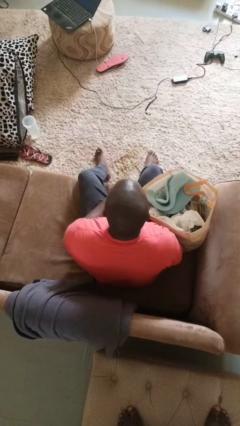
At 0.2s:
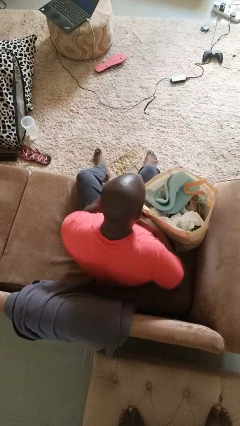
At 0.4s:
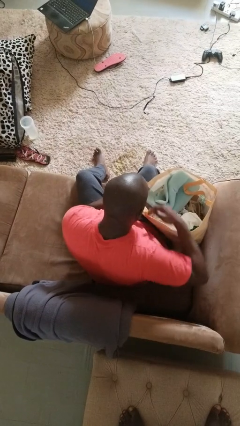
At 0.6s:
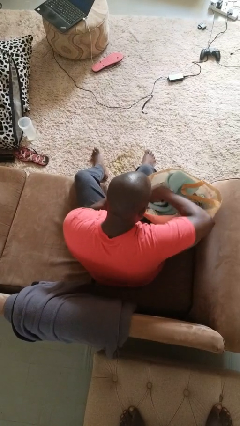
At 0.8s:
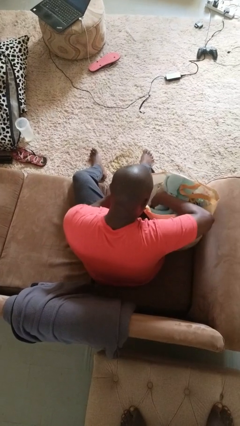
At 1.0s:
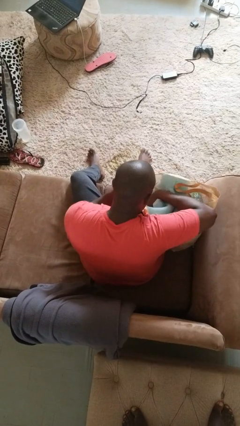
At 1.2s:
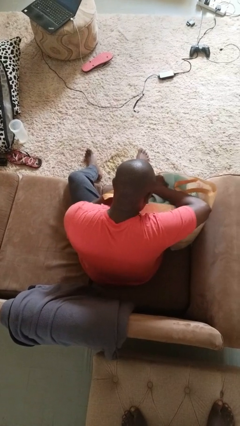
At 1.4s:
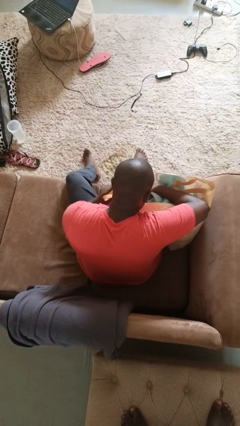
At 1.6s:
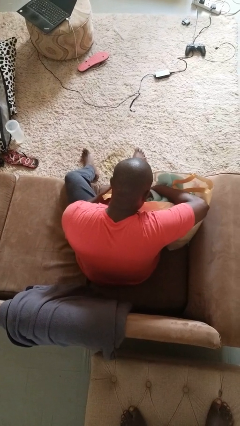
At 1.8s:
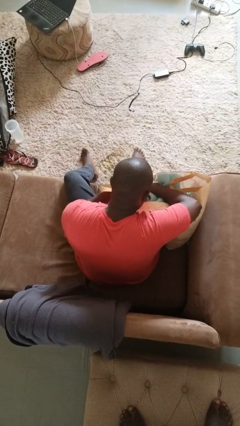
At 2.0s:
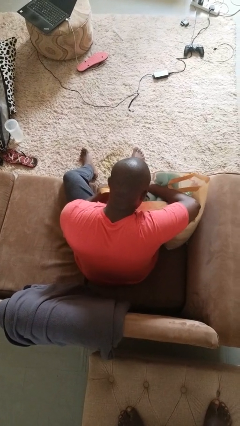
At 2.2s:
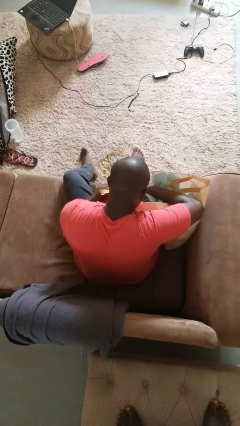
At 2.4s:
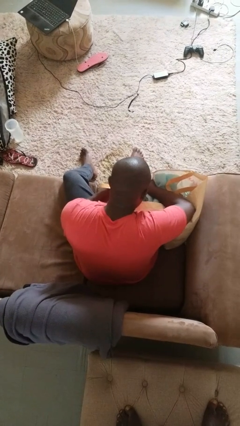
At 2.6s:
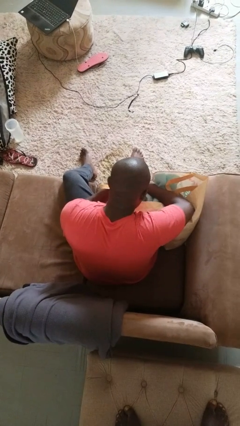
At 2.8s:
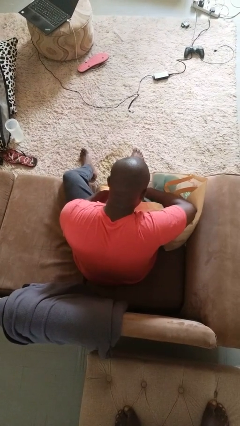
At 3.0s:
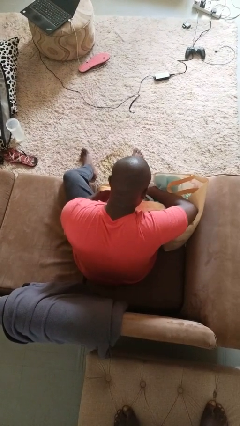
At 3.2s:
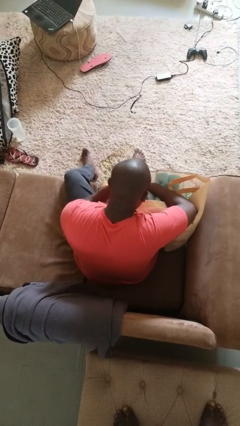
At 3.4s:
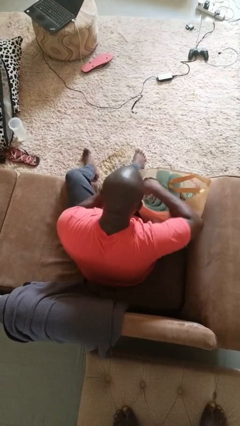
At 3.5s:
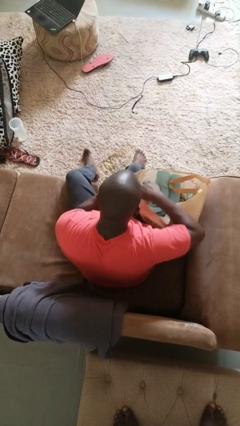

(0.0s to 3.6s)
person searches in bag

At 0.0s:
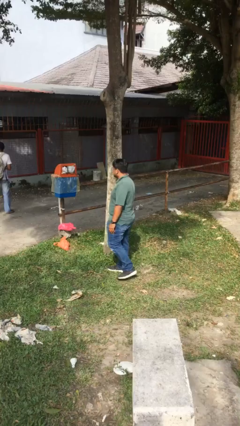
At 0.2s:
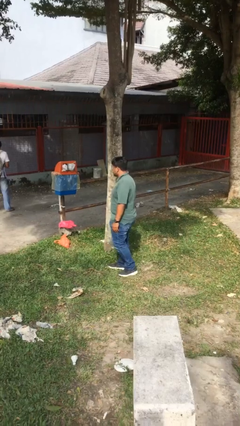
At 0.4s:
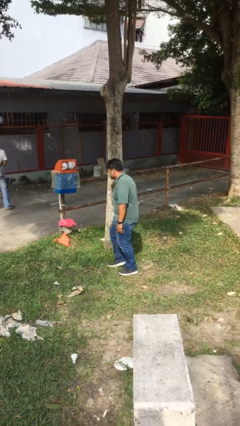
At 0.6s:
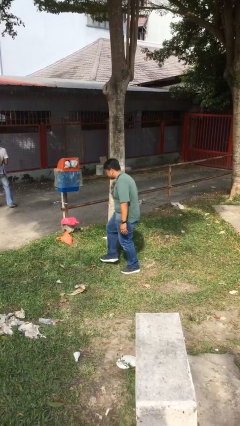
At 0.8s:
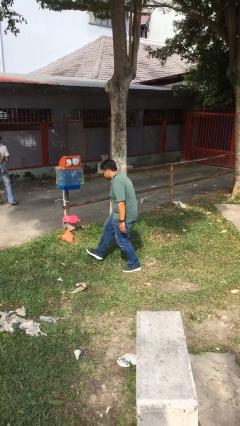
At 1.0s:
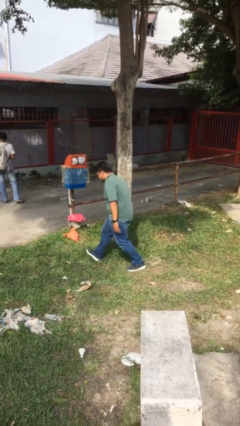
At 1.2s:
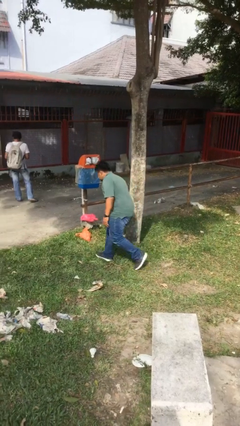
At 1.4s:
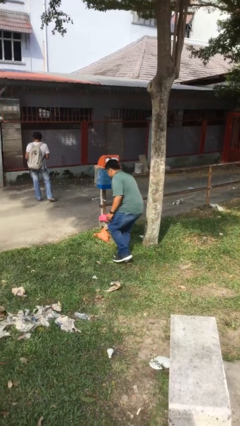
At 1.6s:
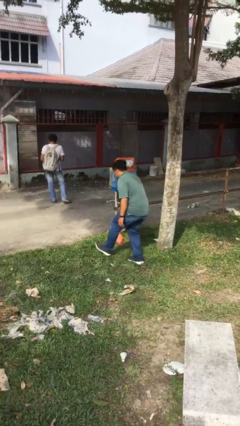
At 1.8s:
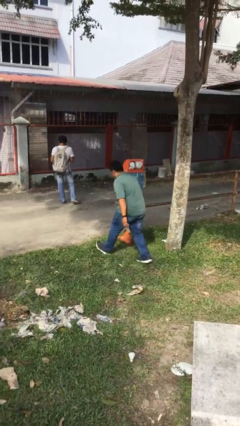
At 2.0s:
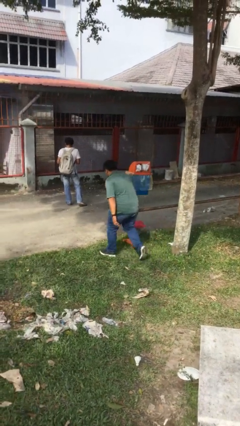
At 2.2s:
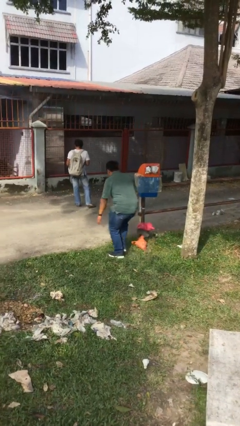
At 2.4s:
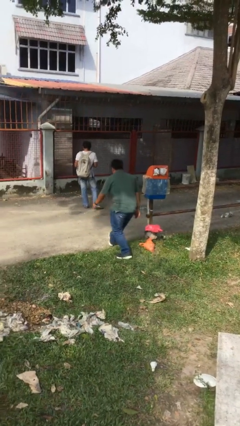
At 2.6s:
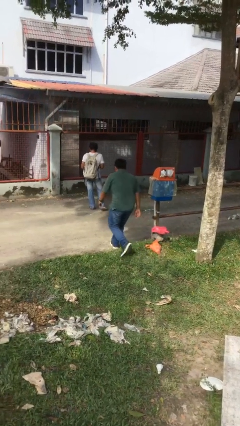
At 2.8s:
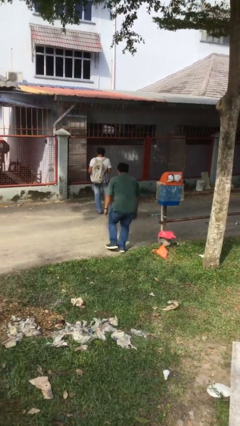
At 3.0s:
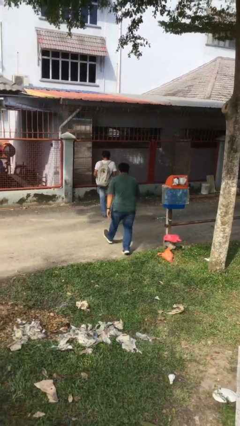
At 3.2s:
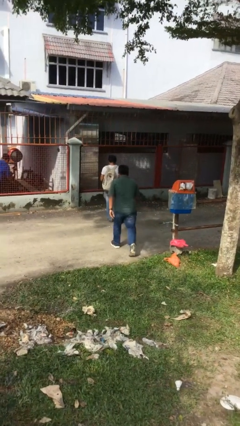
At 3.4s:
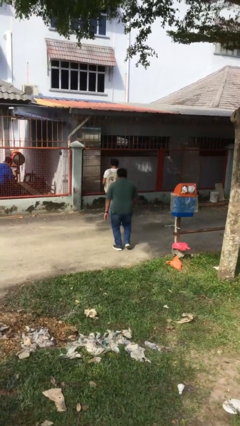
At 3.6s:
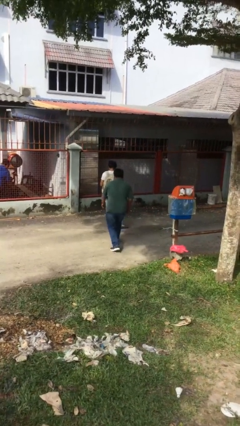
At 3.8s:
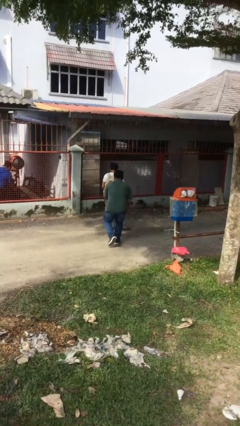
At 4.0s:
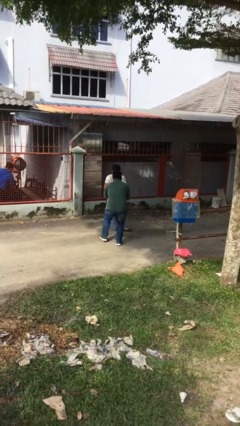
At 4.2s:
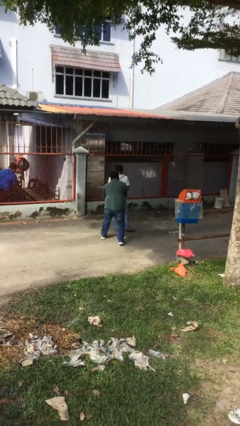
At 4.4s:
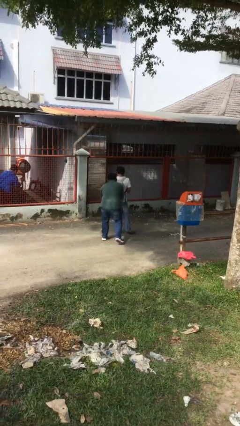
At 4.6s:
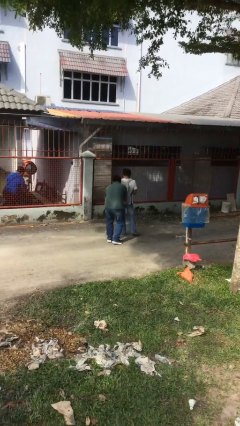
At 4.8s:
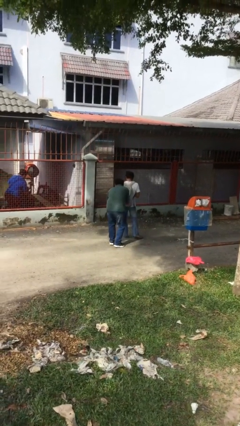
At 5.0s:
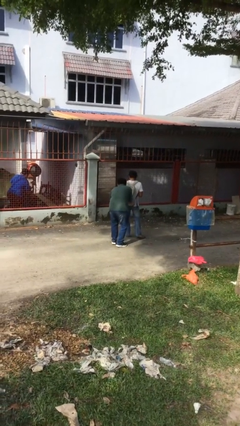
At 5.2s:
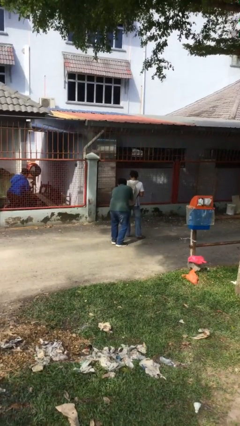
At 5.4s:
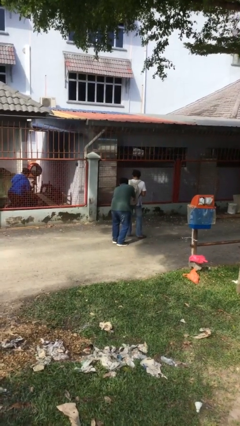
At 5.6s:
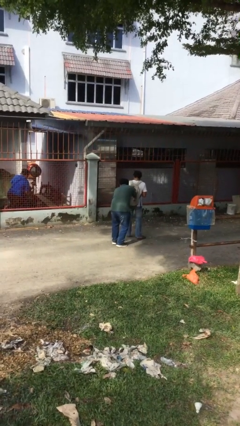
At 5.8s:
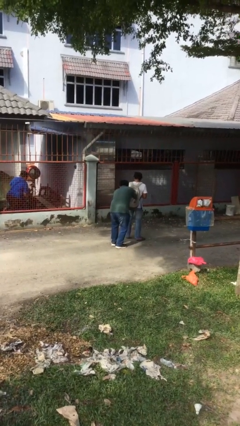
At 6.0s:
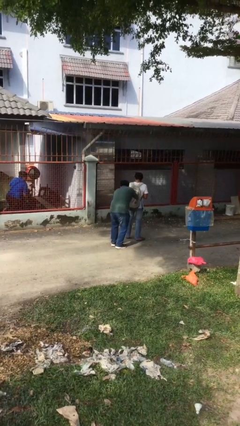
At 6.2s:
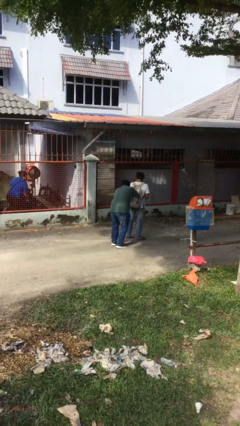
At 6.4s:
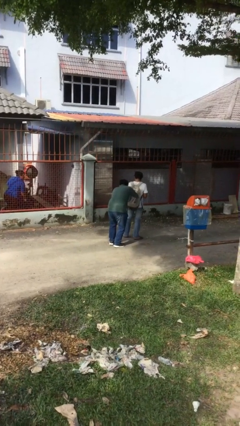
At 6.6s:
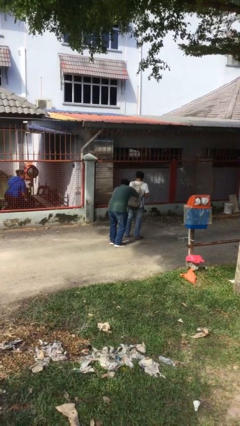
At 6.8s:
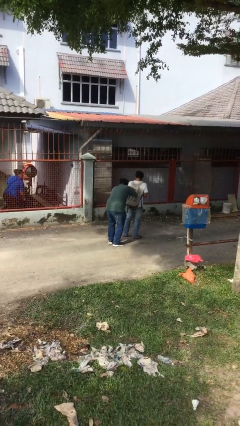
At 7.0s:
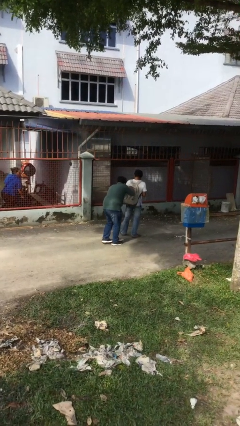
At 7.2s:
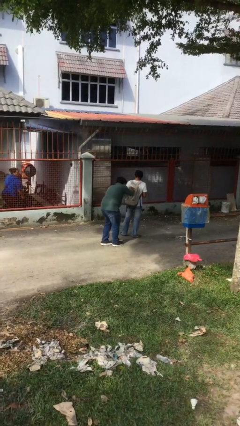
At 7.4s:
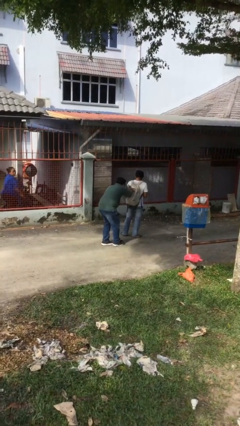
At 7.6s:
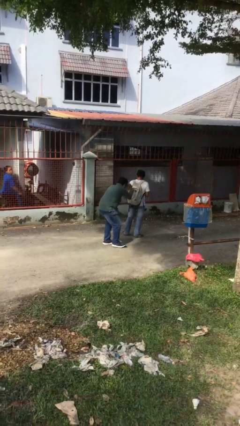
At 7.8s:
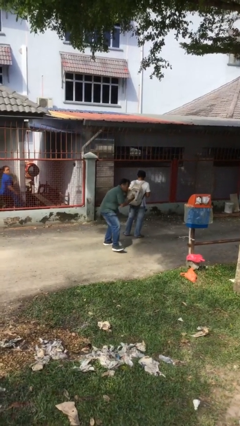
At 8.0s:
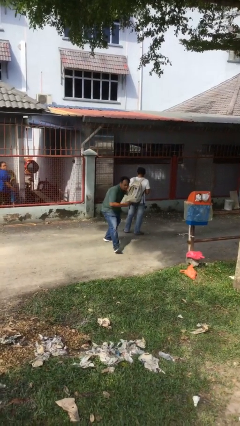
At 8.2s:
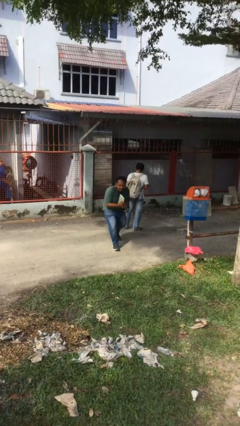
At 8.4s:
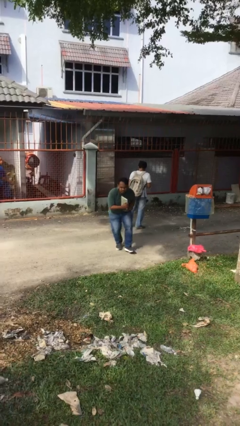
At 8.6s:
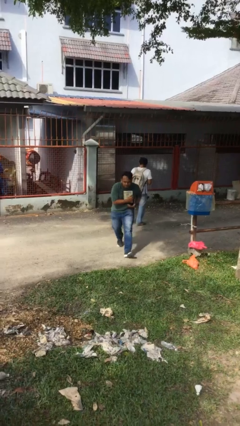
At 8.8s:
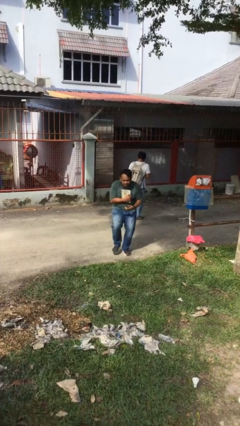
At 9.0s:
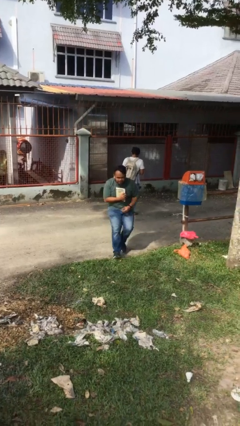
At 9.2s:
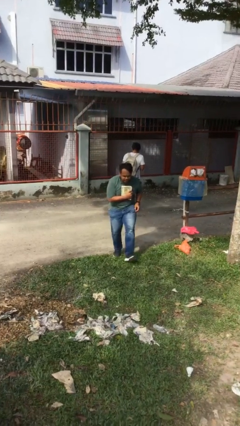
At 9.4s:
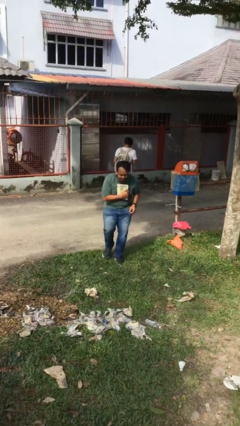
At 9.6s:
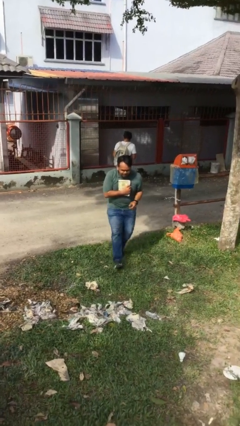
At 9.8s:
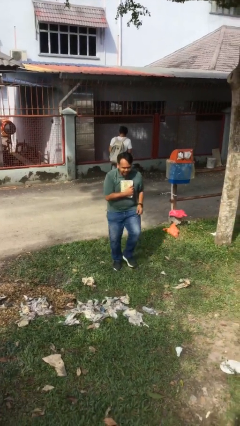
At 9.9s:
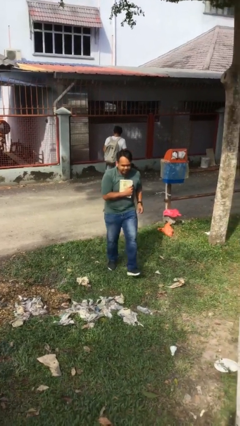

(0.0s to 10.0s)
person steals object from person

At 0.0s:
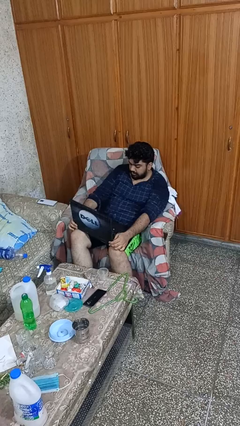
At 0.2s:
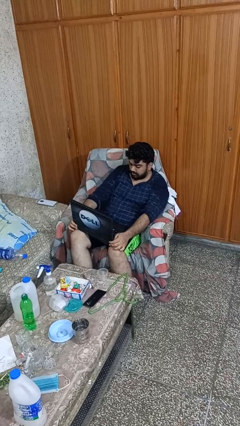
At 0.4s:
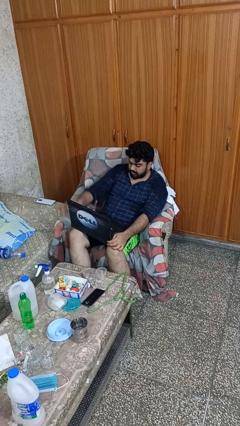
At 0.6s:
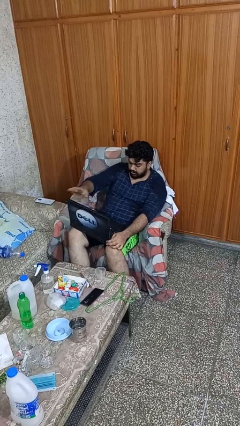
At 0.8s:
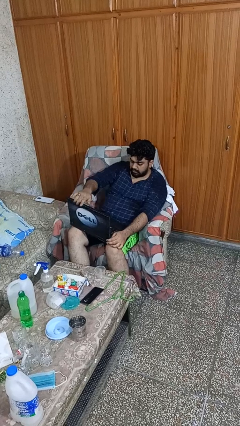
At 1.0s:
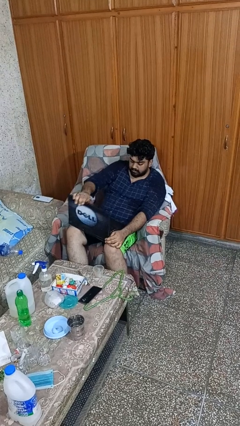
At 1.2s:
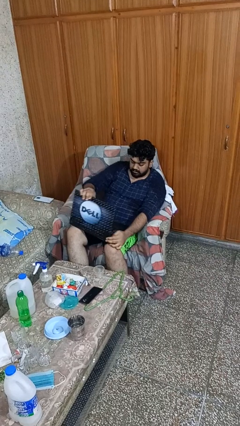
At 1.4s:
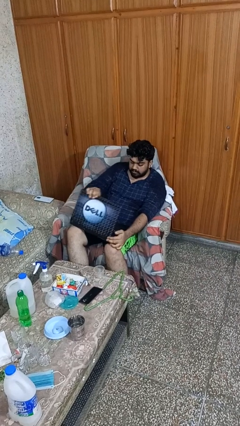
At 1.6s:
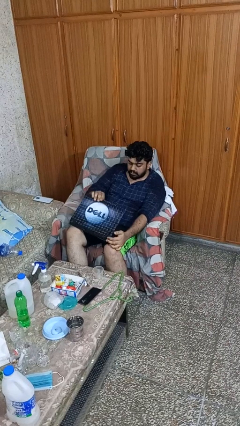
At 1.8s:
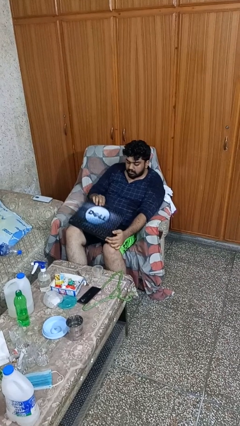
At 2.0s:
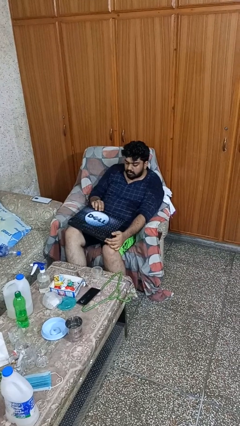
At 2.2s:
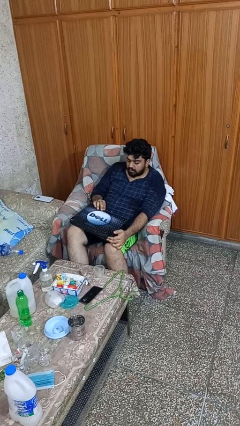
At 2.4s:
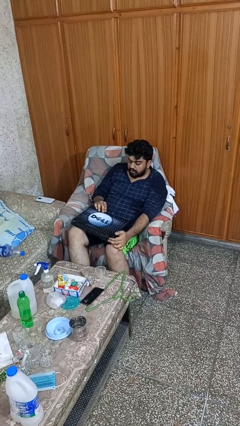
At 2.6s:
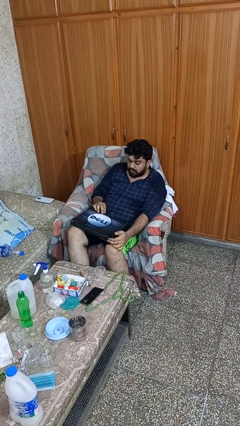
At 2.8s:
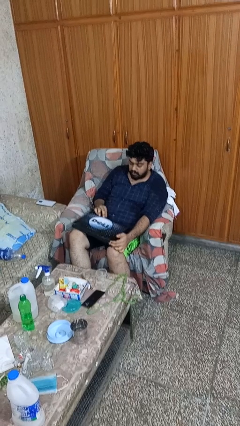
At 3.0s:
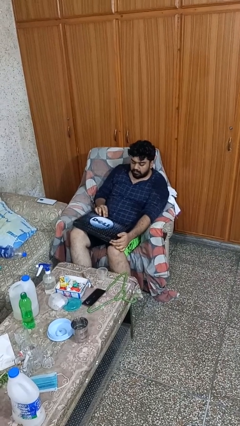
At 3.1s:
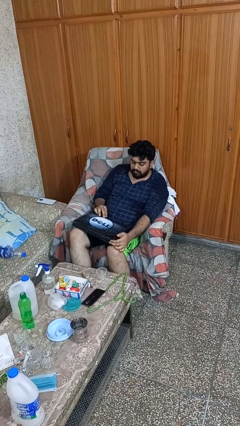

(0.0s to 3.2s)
person closes laptop

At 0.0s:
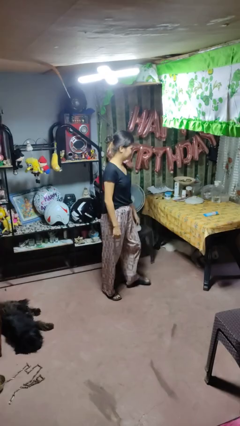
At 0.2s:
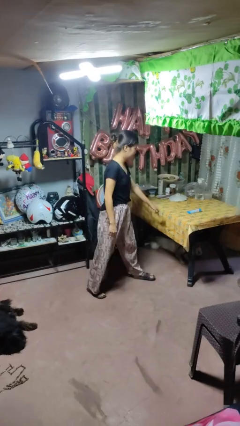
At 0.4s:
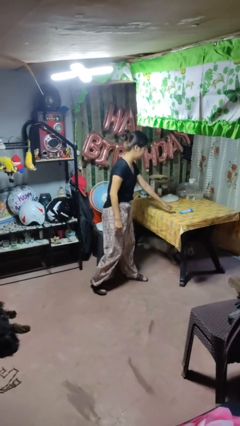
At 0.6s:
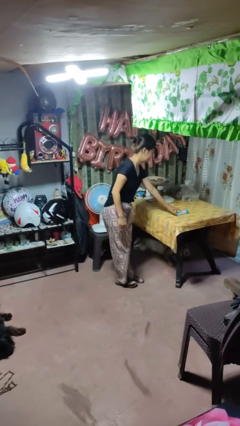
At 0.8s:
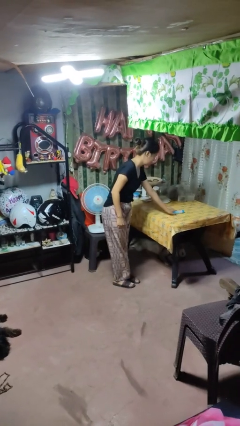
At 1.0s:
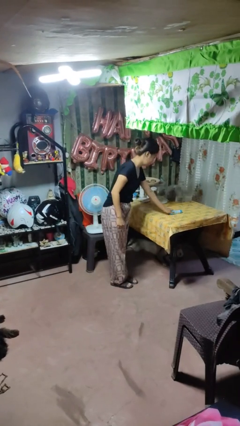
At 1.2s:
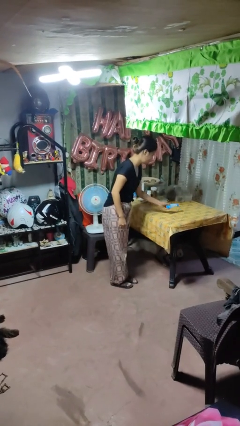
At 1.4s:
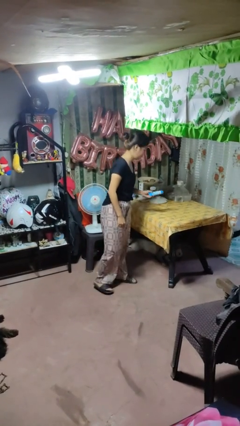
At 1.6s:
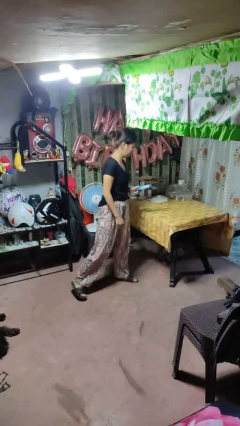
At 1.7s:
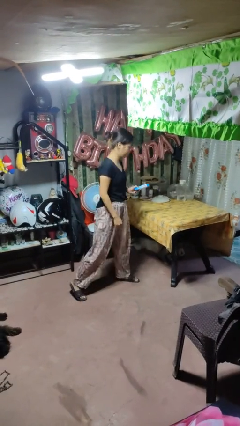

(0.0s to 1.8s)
person picks up object from table
